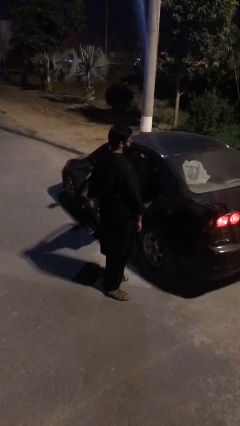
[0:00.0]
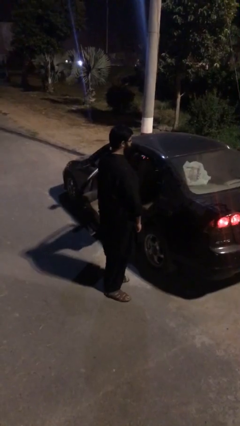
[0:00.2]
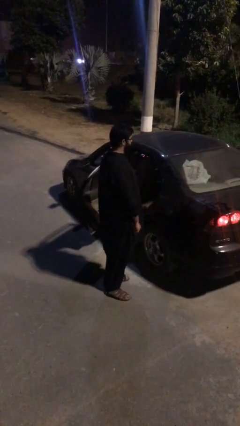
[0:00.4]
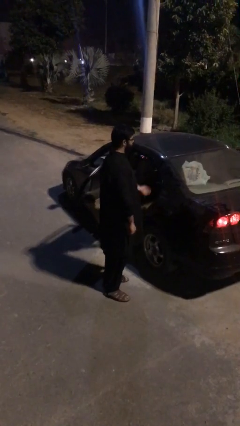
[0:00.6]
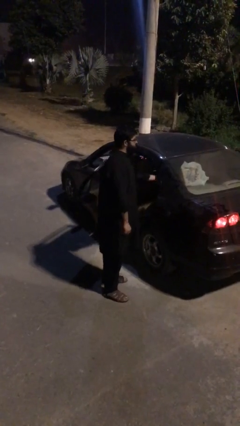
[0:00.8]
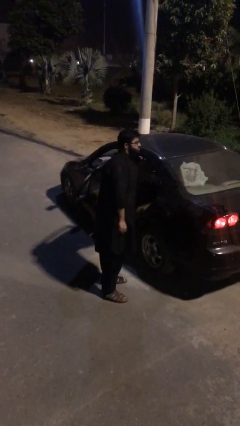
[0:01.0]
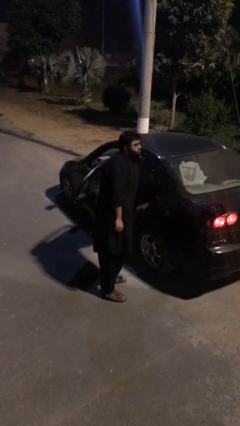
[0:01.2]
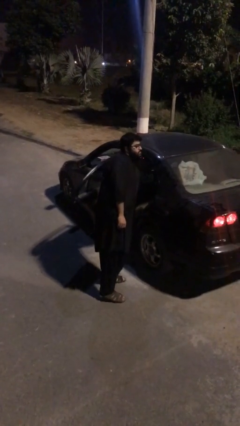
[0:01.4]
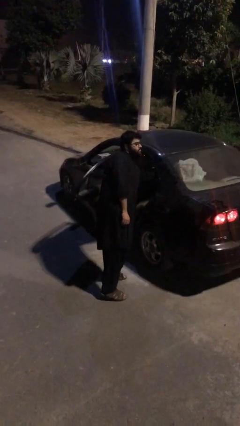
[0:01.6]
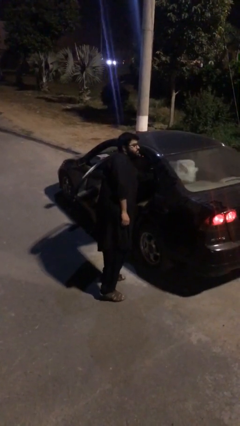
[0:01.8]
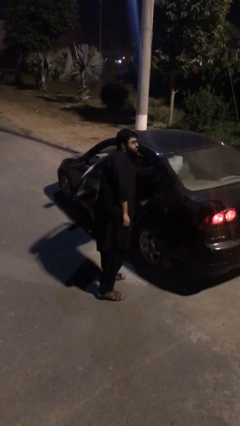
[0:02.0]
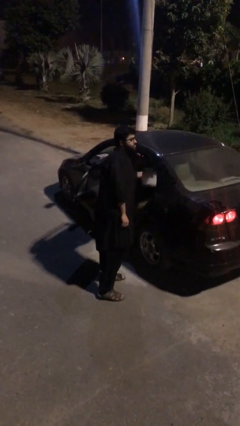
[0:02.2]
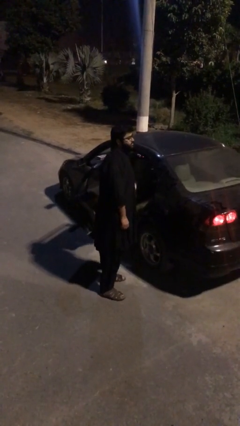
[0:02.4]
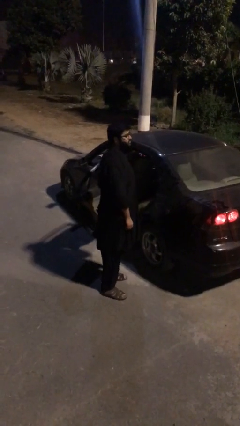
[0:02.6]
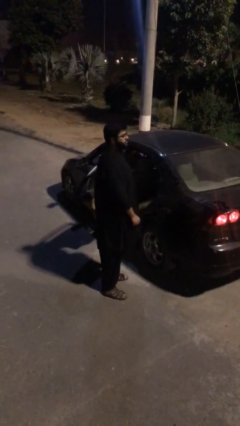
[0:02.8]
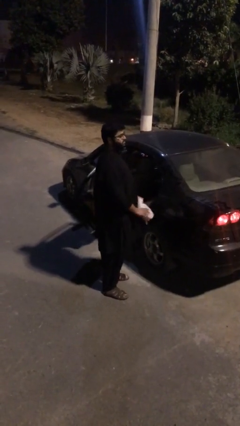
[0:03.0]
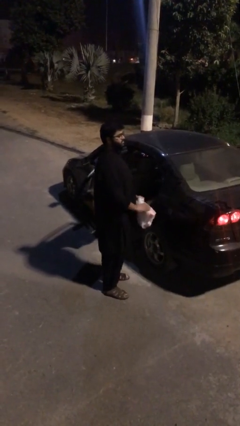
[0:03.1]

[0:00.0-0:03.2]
person unloads car

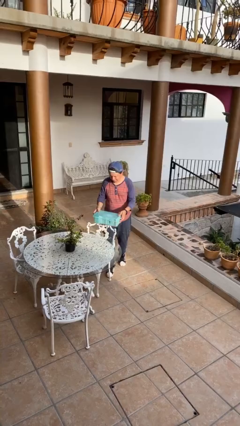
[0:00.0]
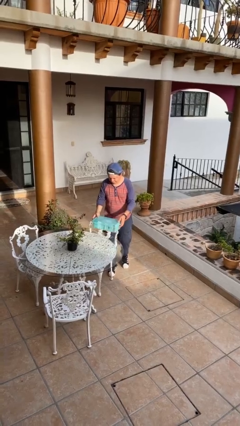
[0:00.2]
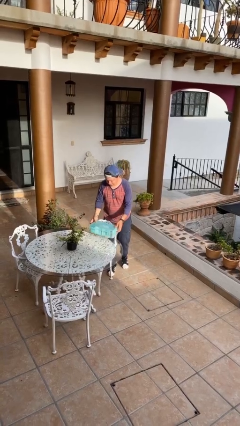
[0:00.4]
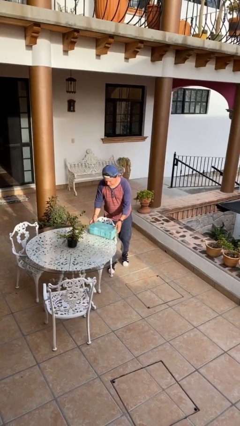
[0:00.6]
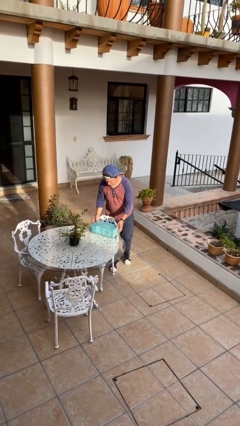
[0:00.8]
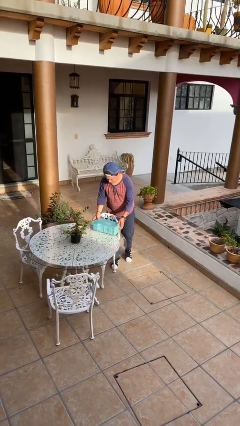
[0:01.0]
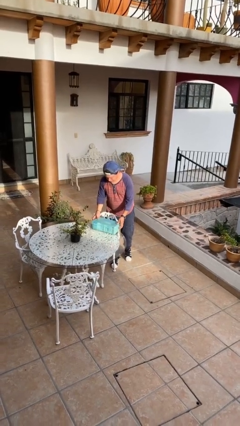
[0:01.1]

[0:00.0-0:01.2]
person puts down object on table

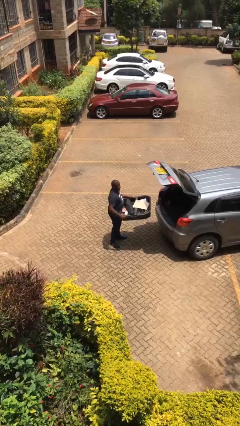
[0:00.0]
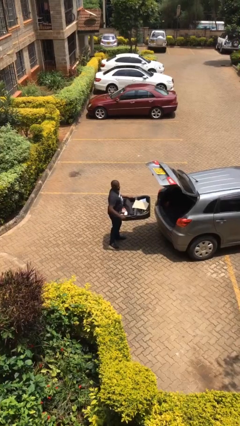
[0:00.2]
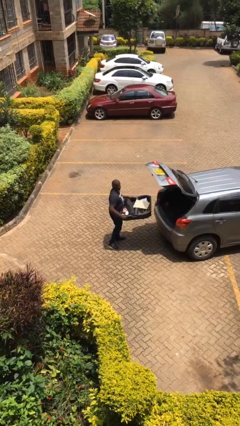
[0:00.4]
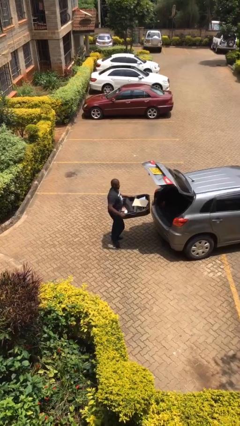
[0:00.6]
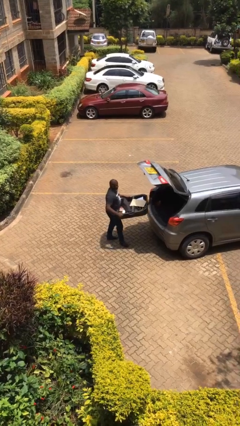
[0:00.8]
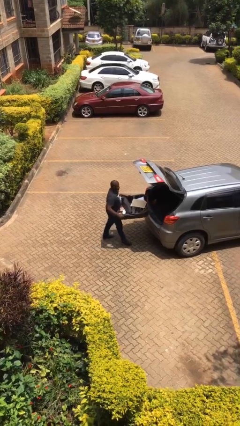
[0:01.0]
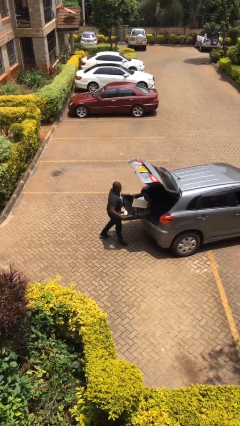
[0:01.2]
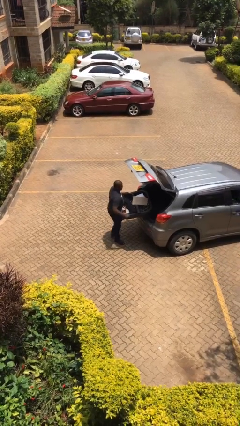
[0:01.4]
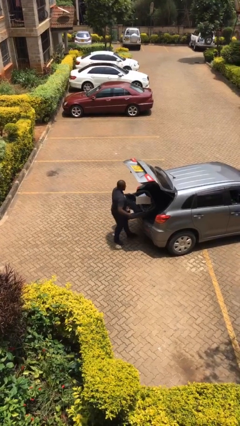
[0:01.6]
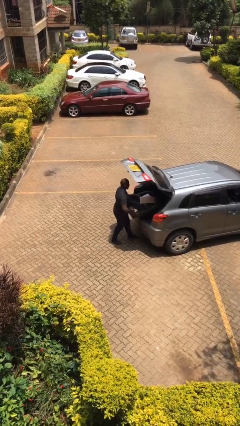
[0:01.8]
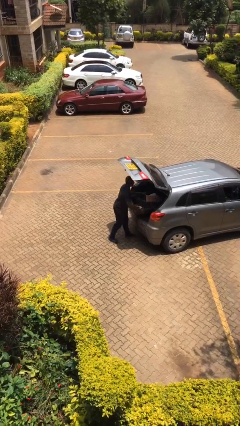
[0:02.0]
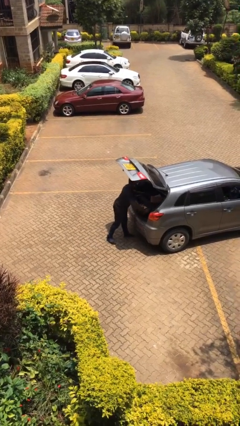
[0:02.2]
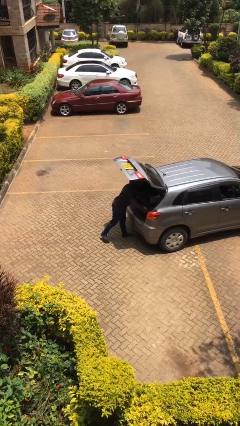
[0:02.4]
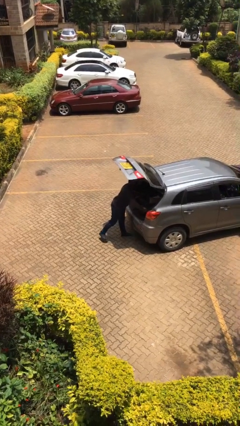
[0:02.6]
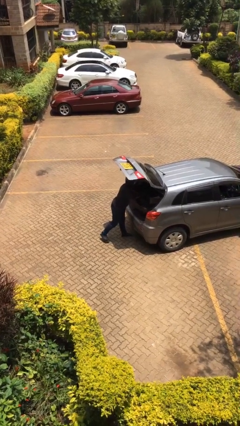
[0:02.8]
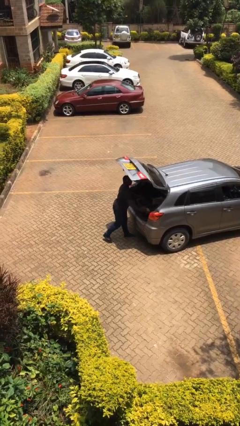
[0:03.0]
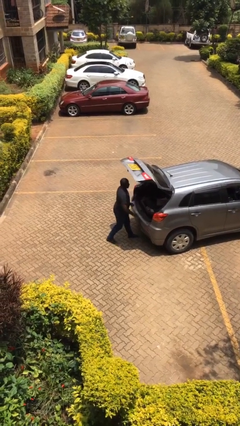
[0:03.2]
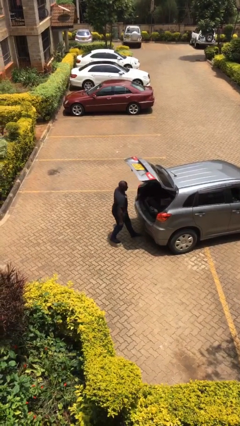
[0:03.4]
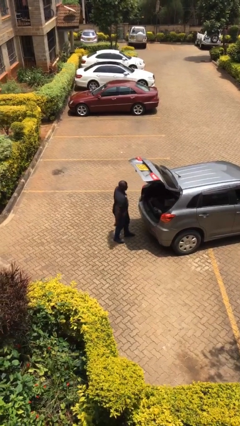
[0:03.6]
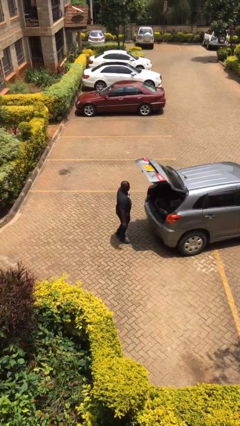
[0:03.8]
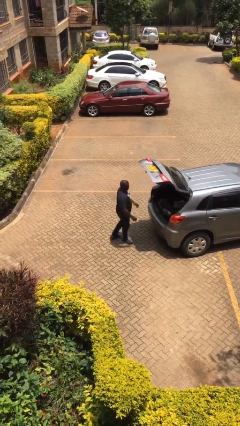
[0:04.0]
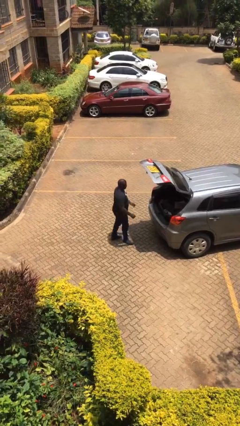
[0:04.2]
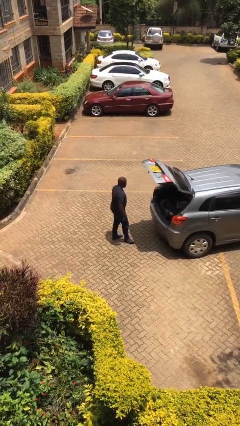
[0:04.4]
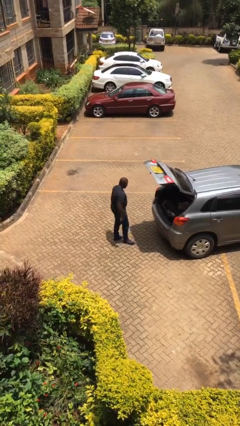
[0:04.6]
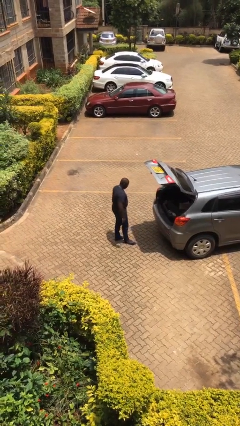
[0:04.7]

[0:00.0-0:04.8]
person loads car

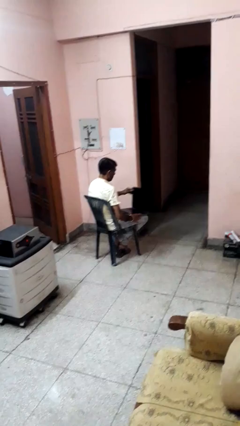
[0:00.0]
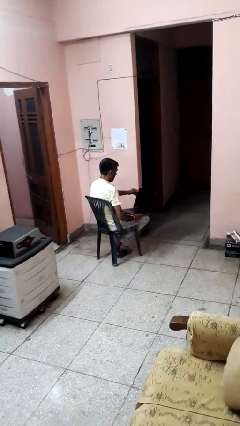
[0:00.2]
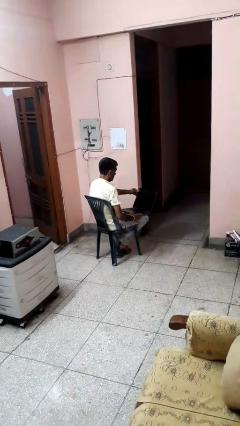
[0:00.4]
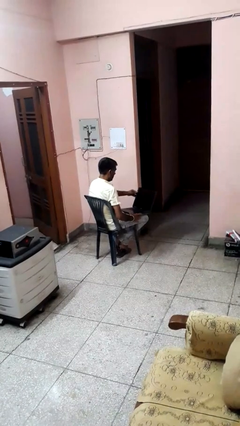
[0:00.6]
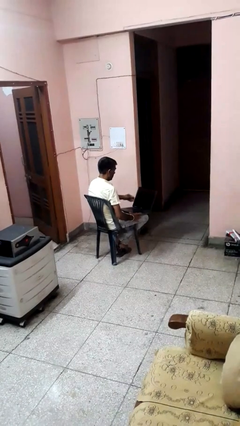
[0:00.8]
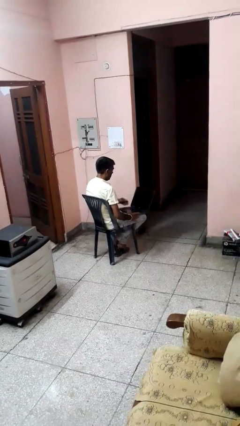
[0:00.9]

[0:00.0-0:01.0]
person opens laptop

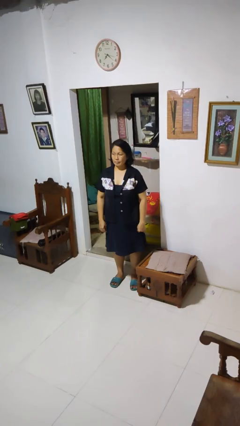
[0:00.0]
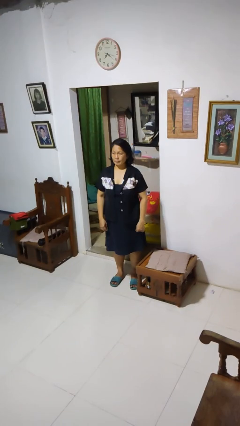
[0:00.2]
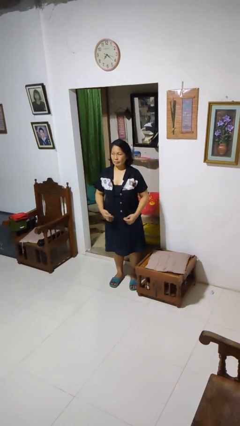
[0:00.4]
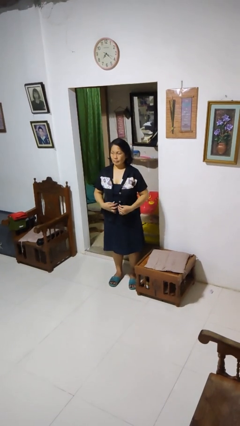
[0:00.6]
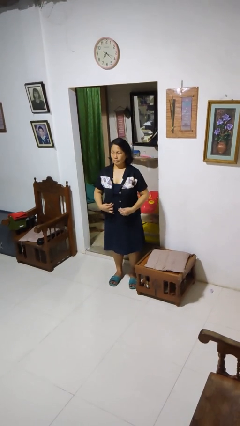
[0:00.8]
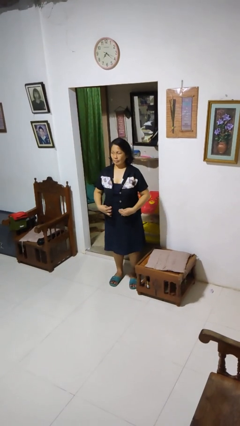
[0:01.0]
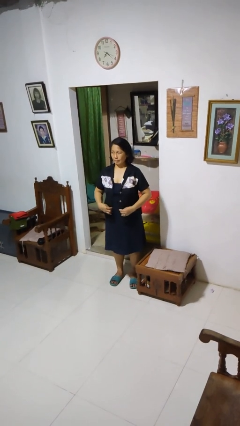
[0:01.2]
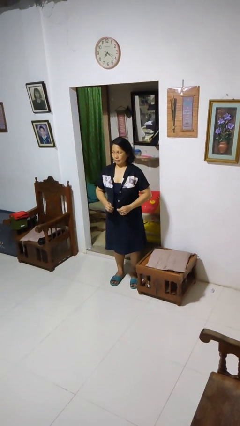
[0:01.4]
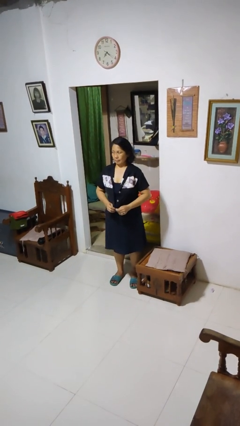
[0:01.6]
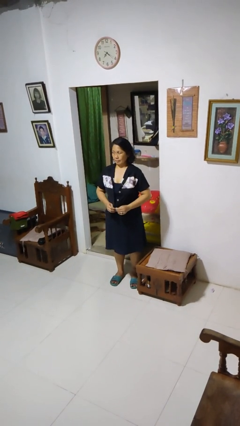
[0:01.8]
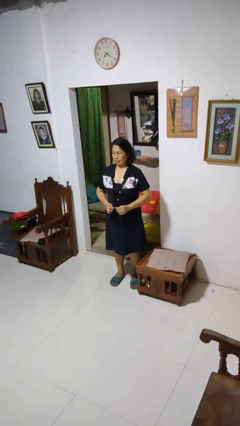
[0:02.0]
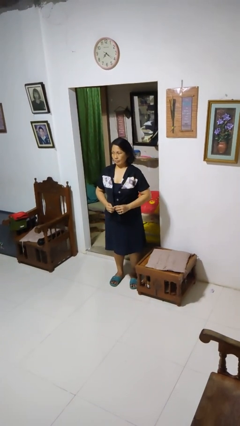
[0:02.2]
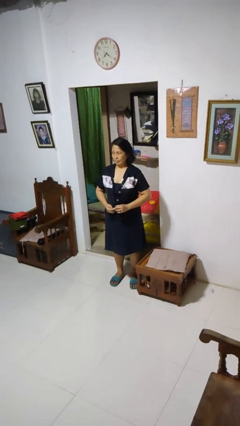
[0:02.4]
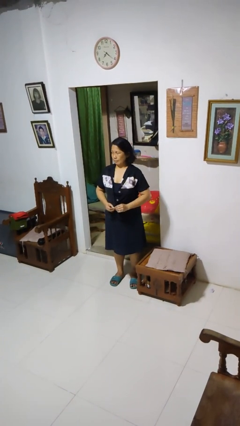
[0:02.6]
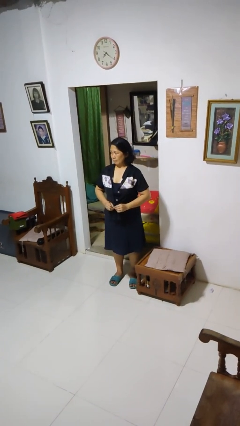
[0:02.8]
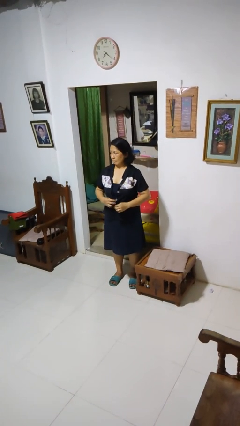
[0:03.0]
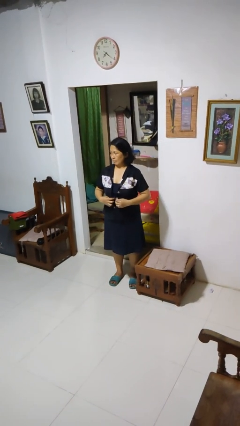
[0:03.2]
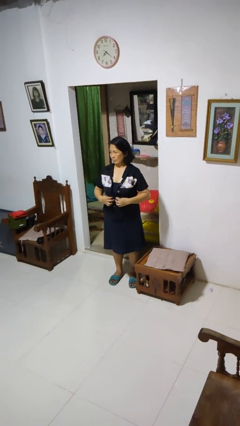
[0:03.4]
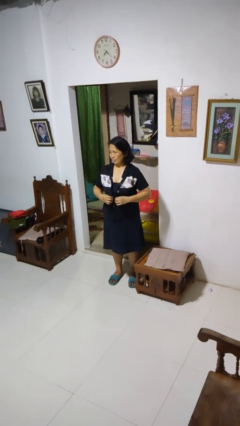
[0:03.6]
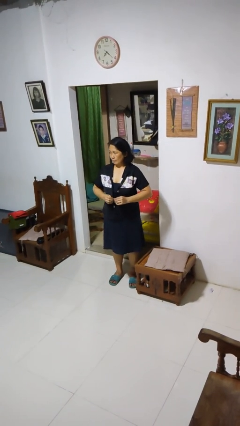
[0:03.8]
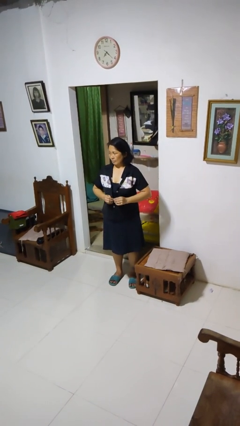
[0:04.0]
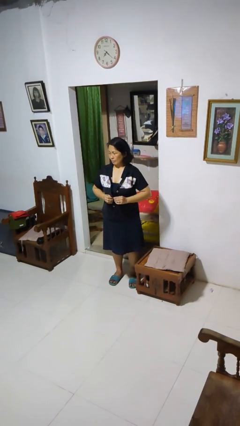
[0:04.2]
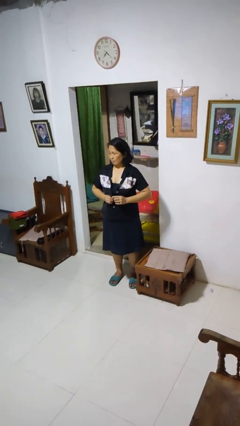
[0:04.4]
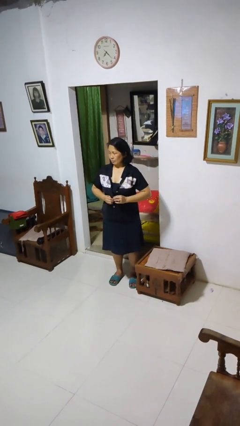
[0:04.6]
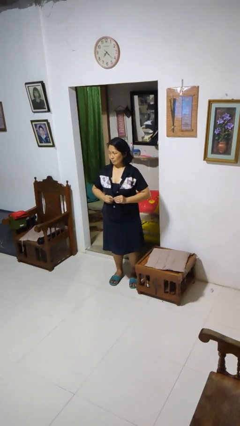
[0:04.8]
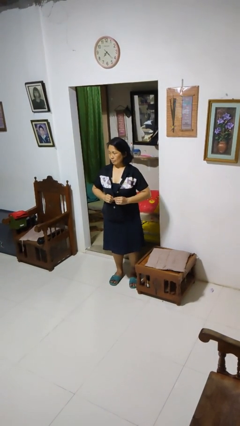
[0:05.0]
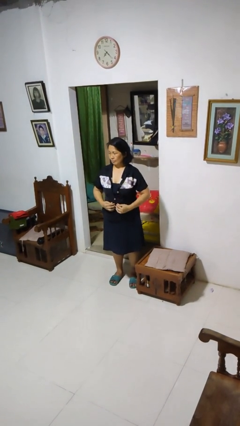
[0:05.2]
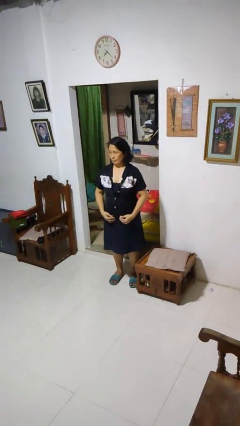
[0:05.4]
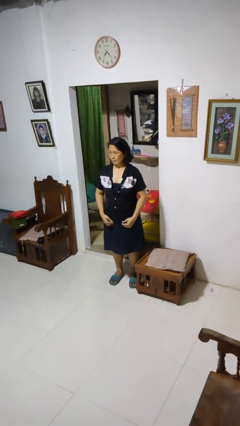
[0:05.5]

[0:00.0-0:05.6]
person buttons shirt

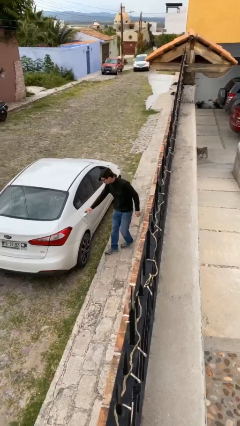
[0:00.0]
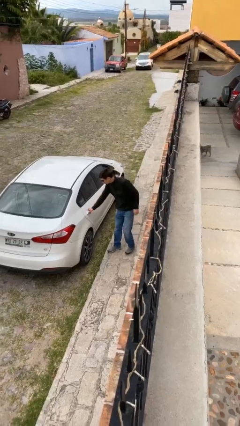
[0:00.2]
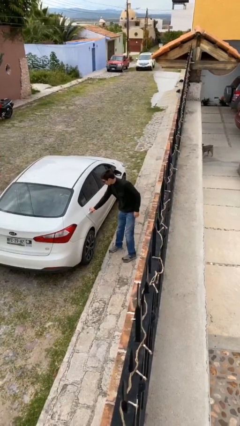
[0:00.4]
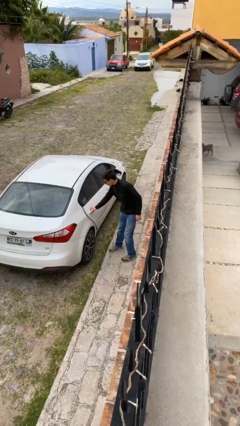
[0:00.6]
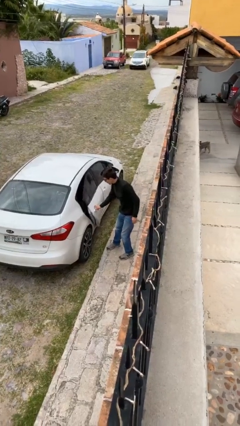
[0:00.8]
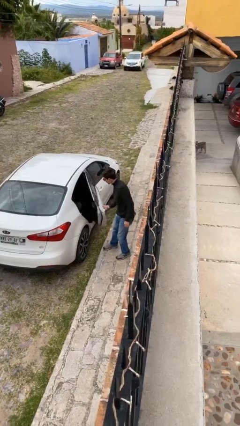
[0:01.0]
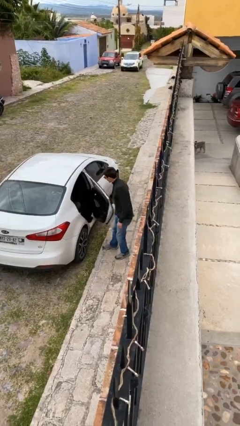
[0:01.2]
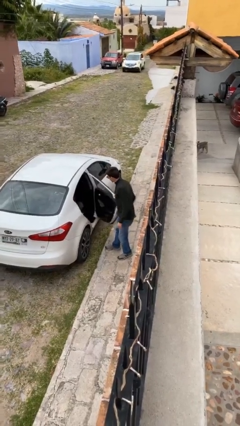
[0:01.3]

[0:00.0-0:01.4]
person opens car door

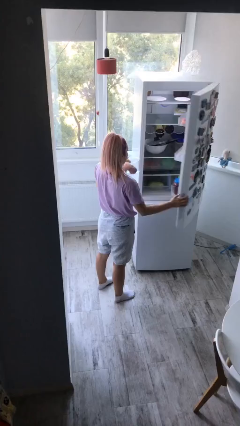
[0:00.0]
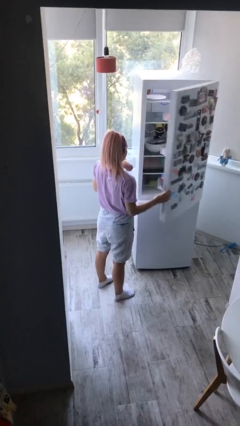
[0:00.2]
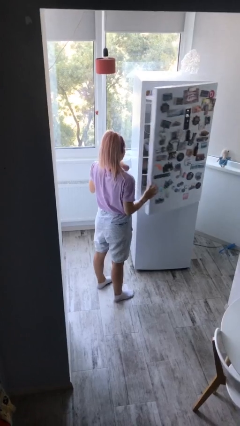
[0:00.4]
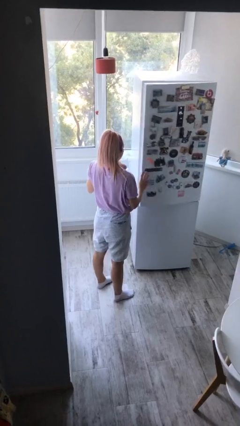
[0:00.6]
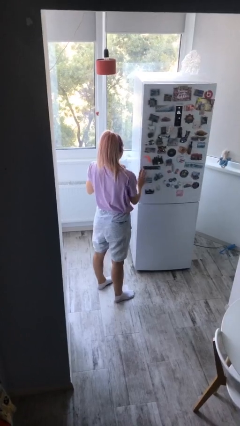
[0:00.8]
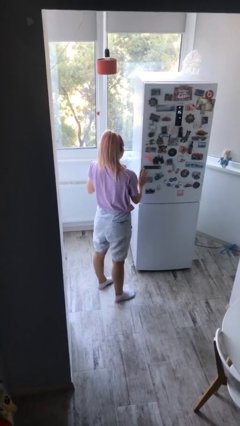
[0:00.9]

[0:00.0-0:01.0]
person closes refrigerator
